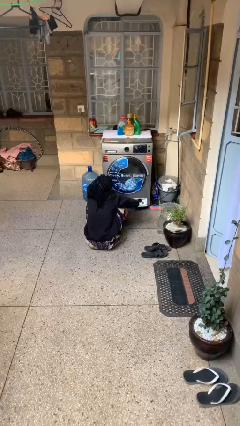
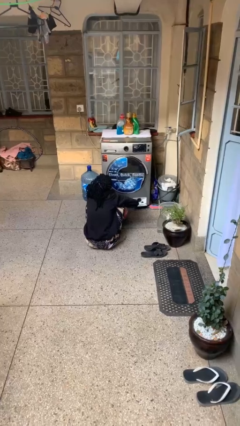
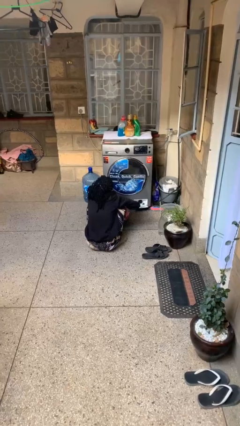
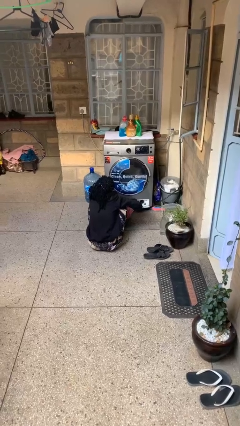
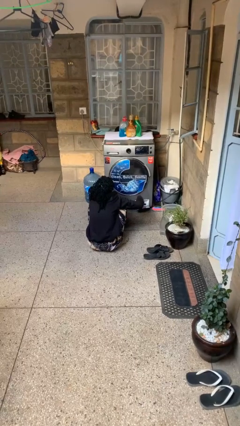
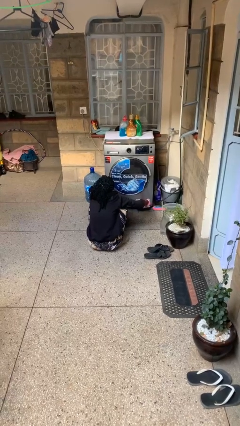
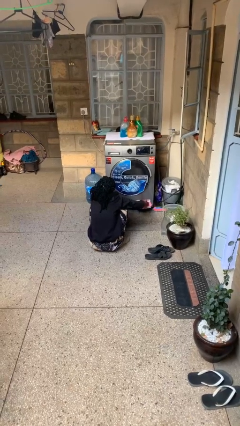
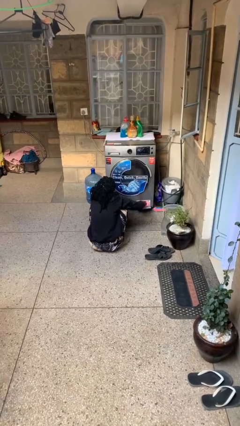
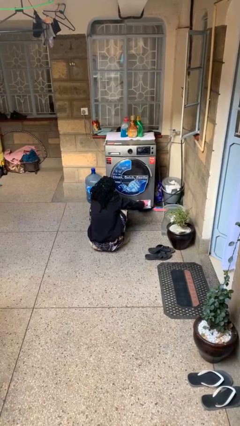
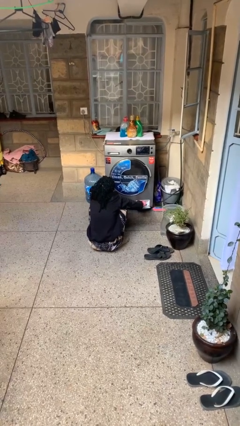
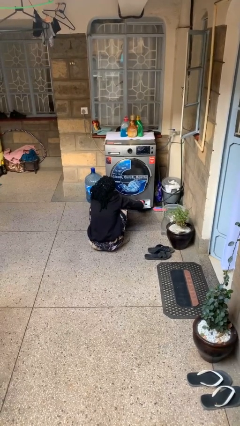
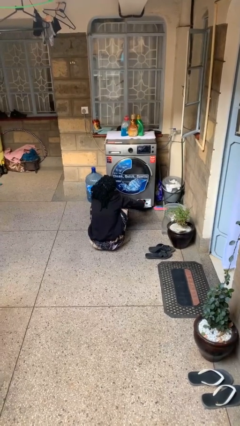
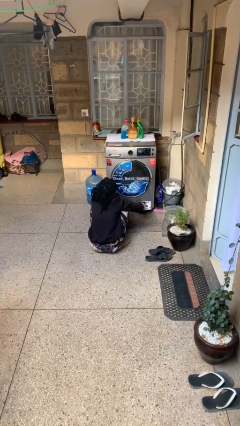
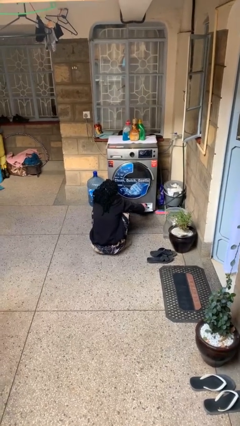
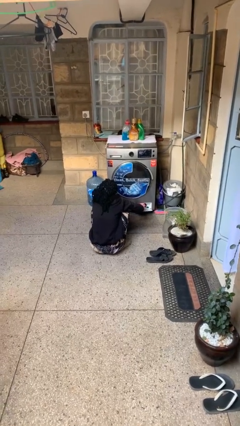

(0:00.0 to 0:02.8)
person cleans dryer lint trap

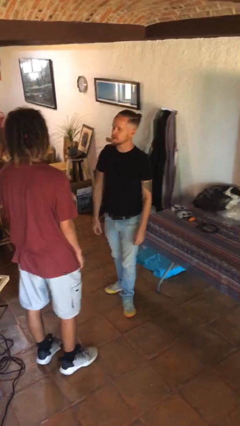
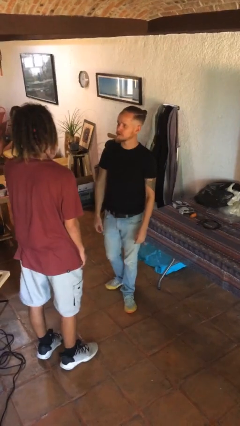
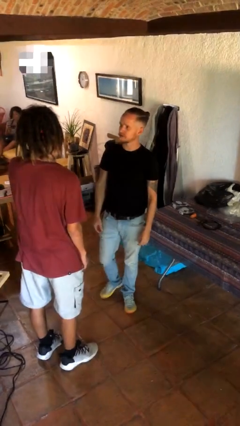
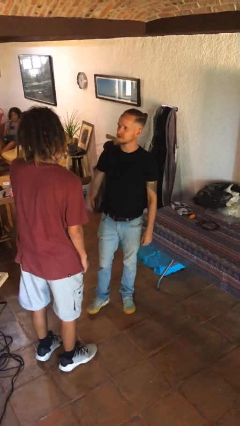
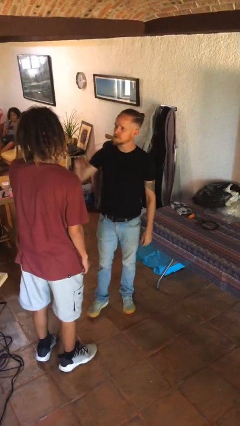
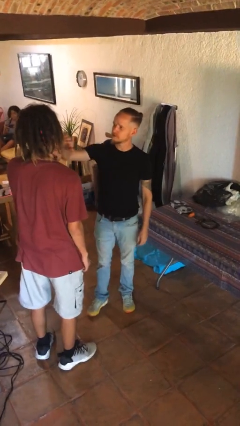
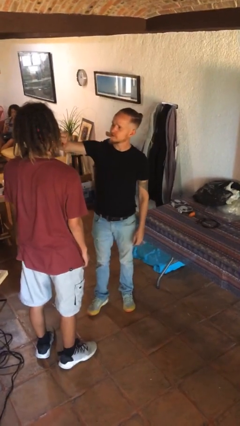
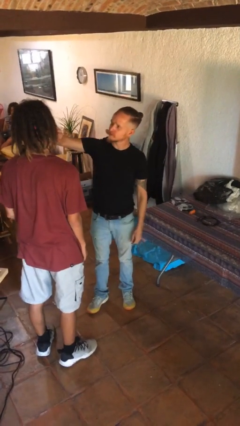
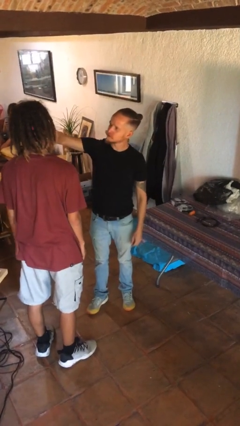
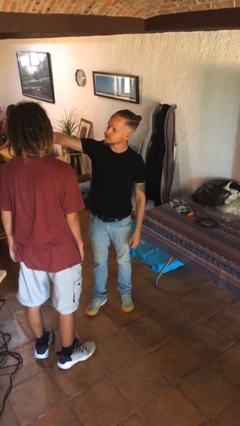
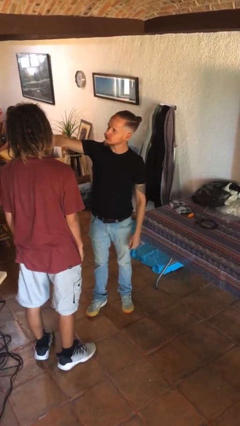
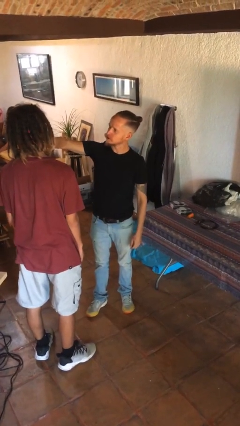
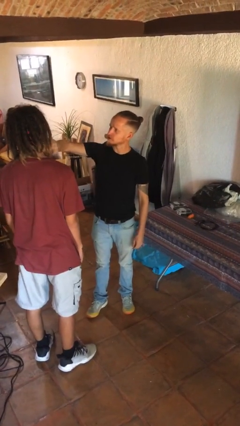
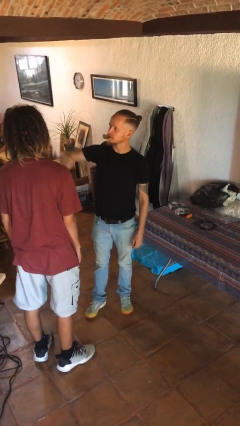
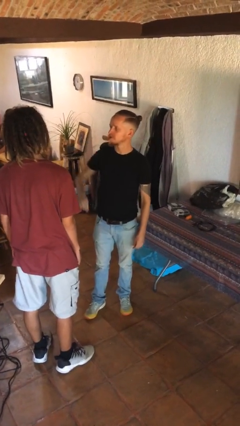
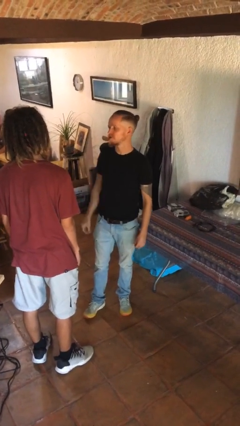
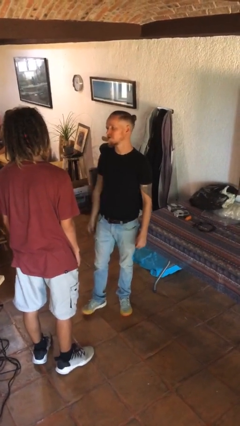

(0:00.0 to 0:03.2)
person touches face of person

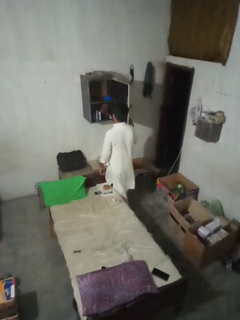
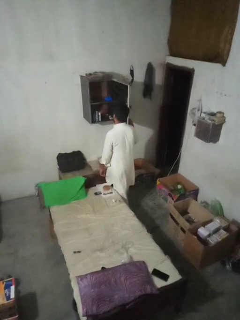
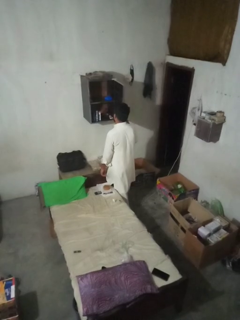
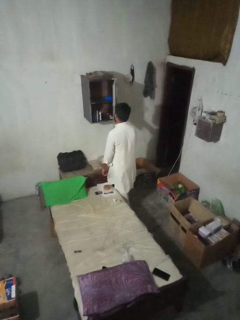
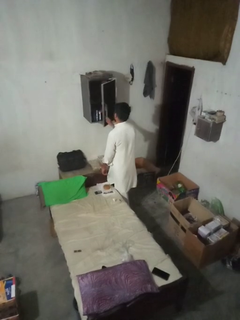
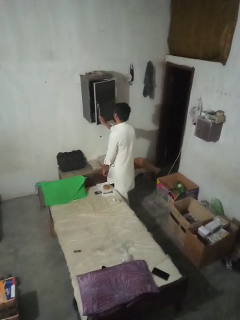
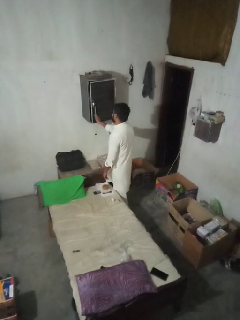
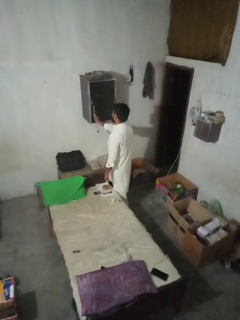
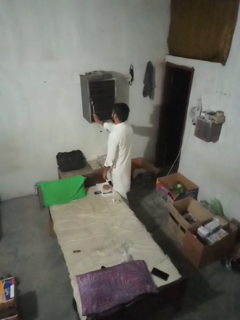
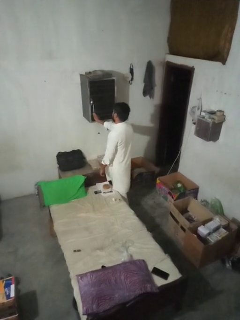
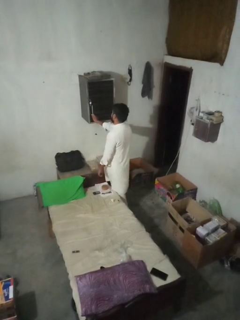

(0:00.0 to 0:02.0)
person closes dresser drawer

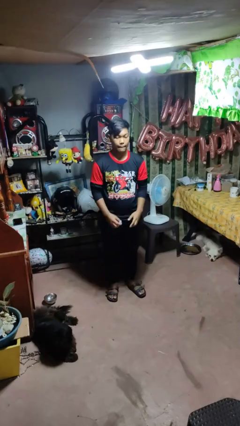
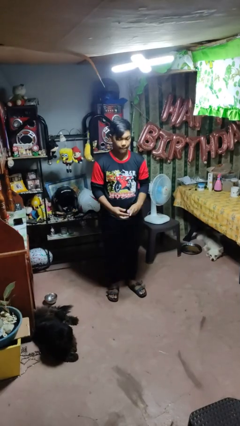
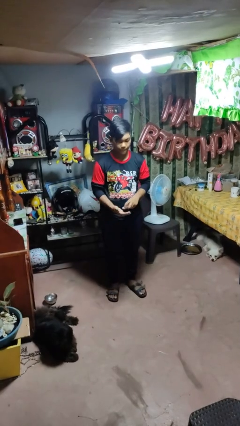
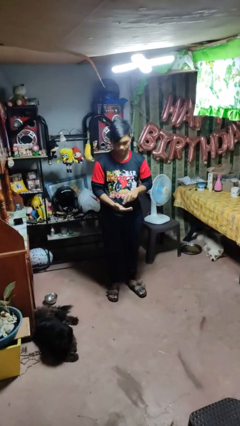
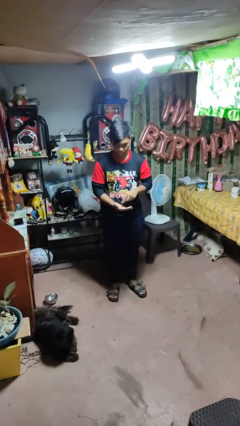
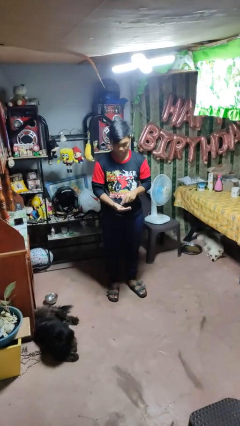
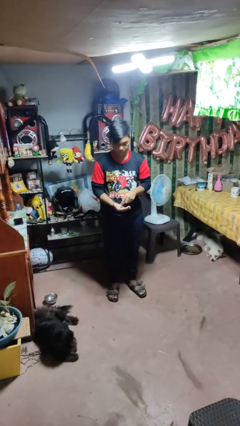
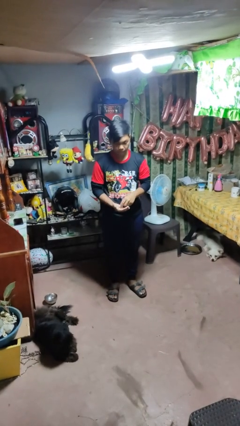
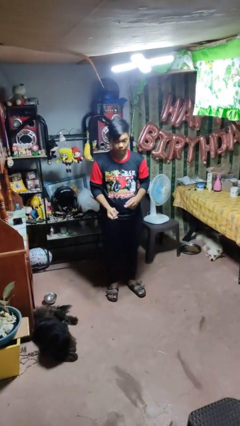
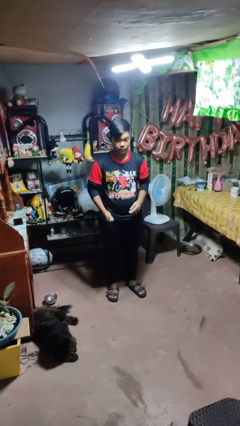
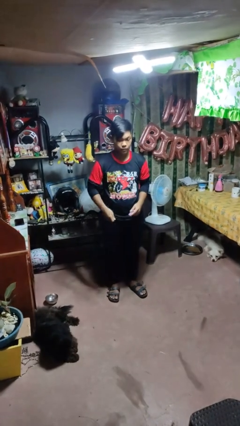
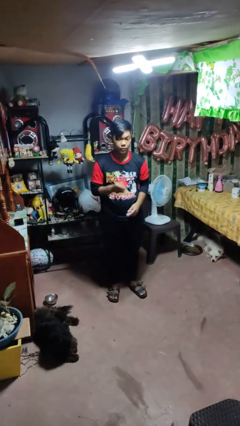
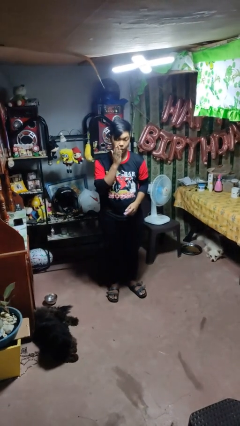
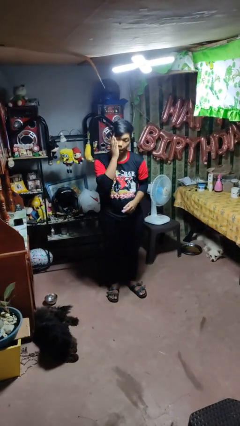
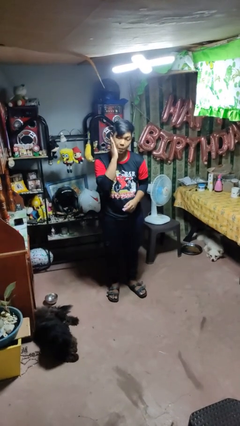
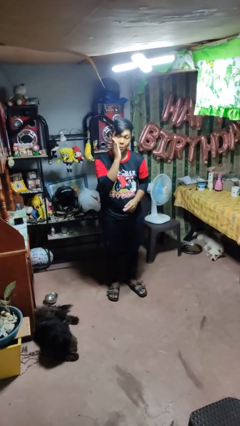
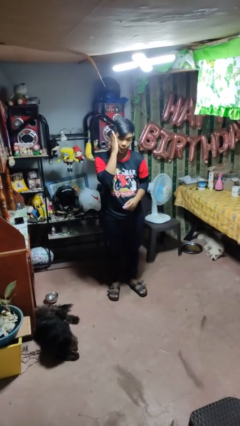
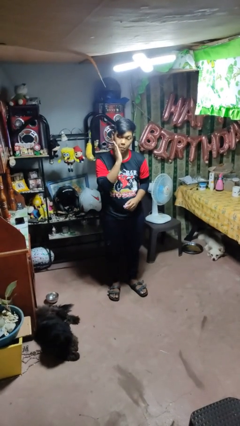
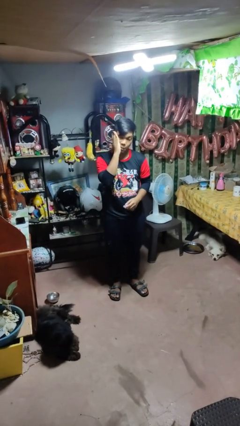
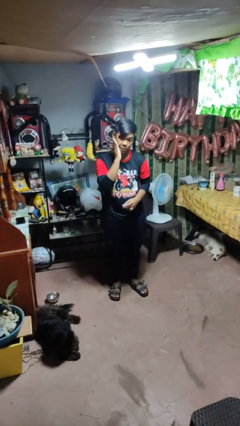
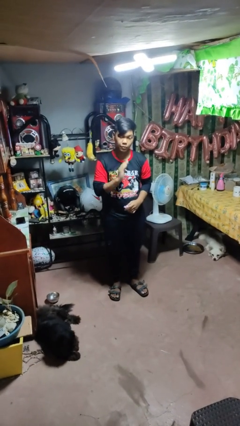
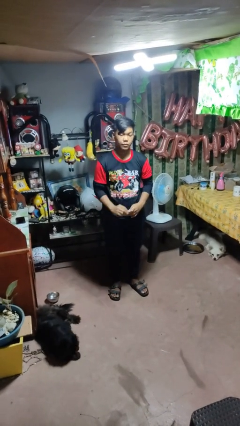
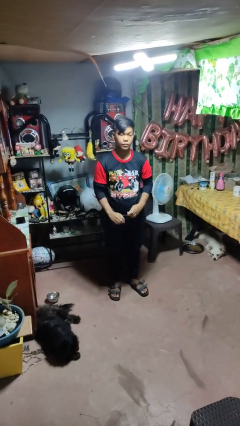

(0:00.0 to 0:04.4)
person applies facial moisturizer

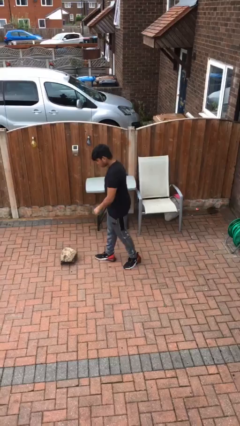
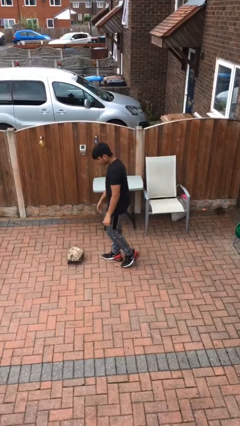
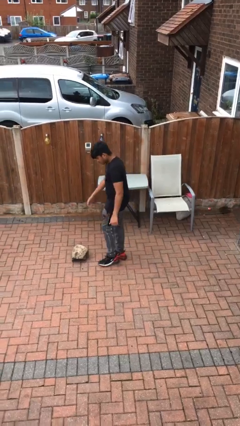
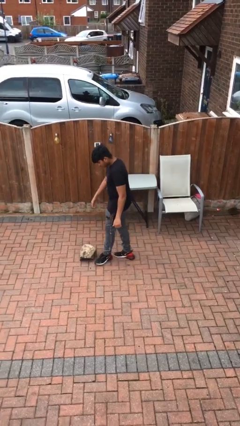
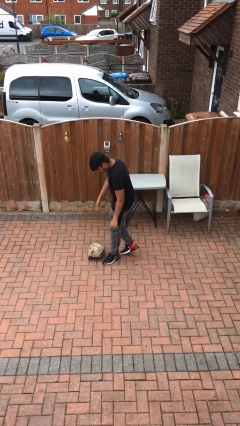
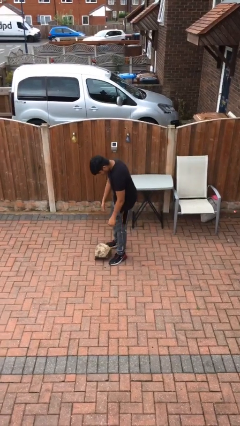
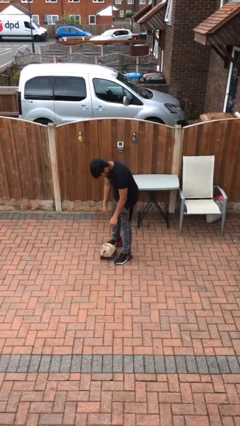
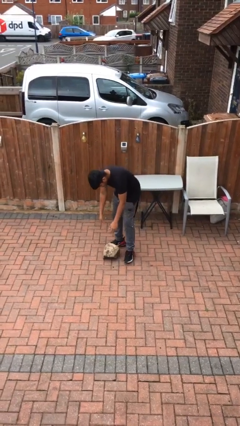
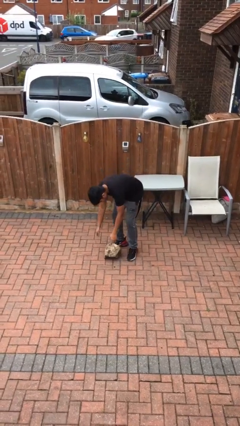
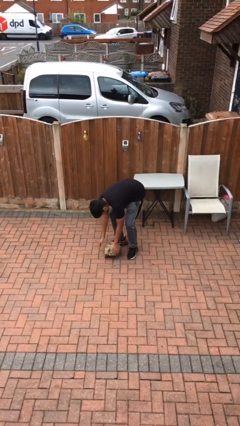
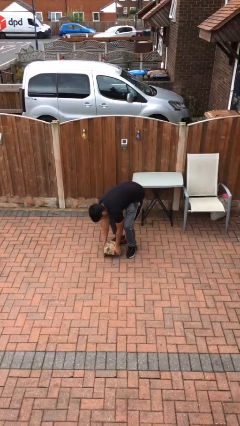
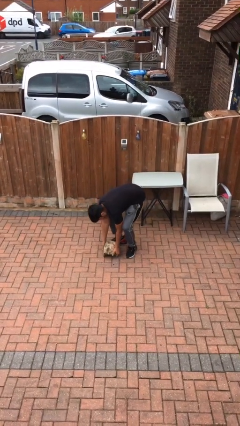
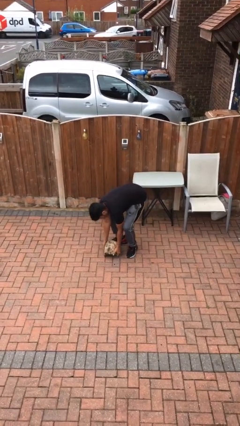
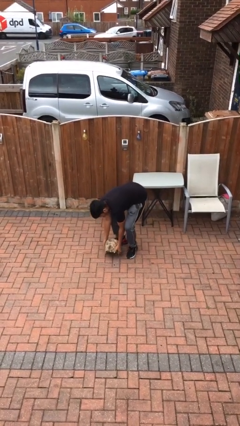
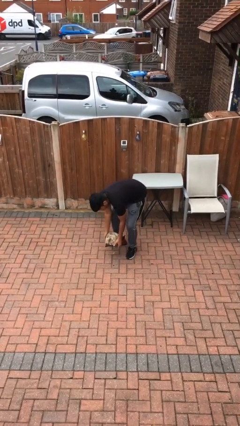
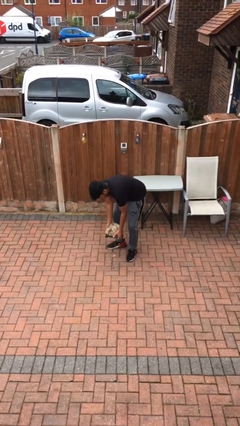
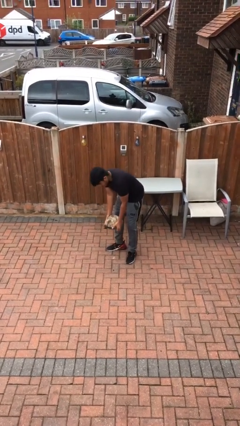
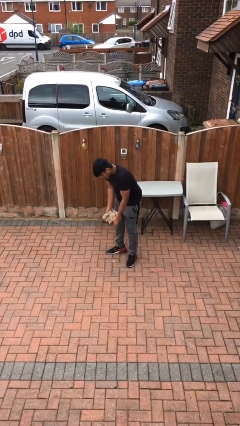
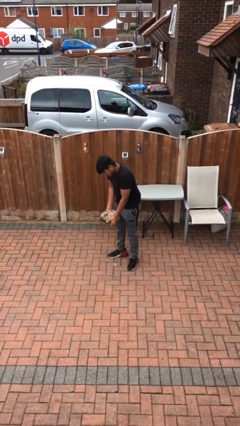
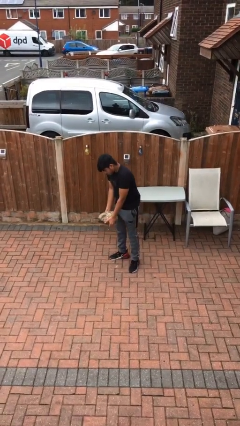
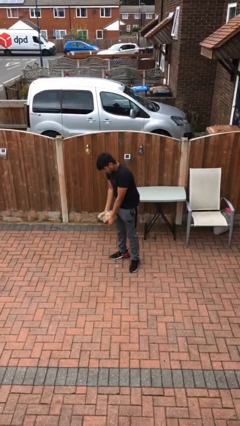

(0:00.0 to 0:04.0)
person picks up object from floor

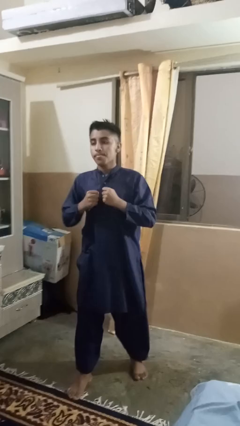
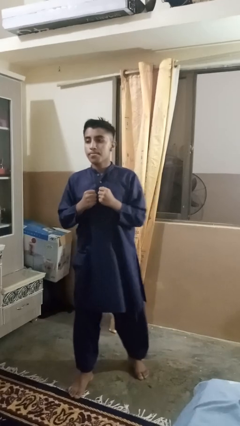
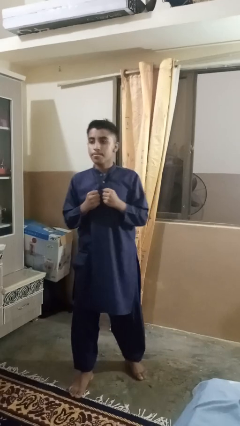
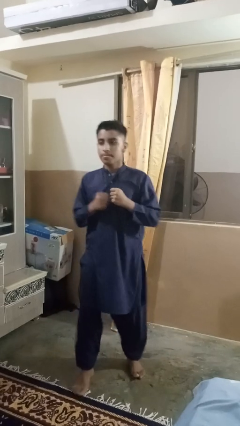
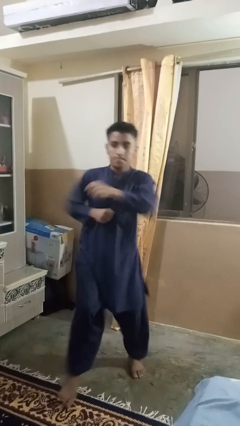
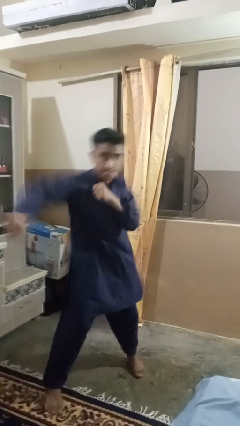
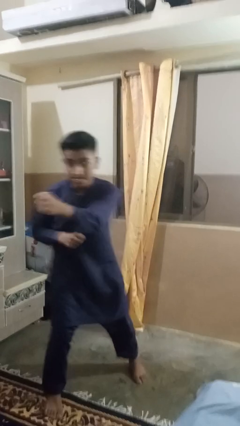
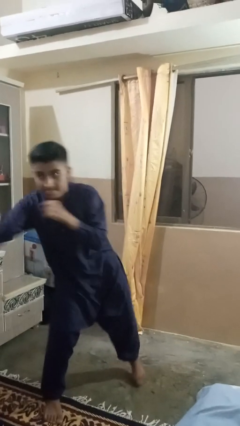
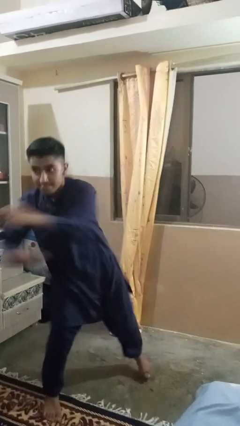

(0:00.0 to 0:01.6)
person punches

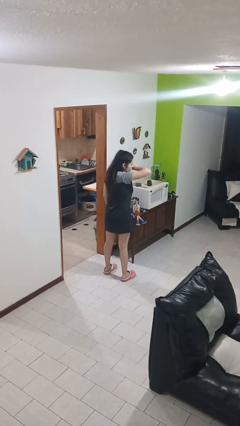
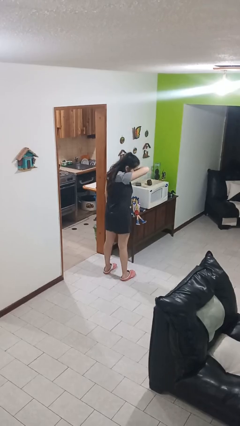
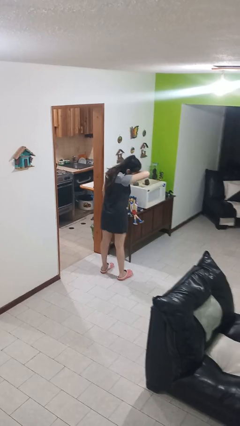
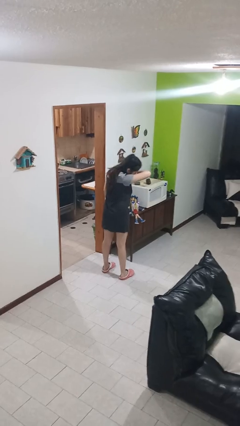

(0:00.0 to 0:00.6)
person sneezes into arm
